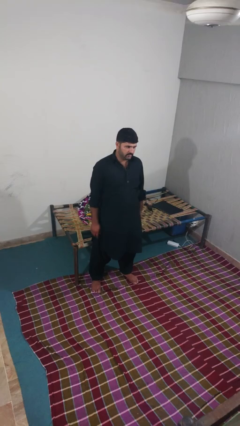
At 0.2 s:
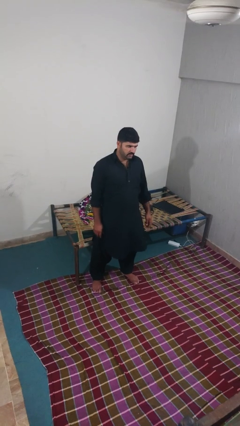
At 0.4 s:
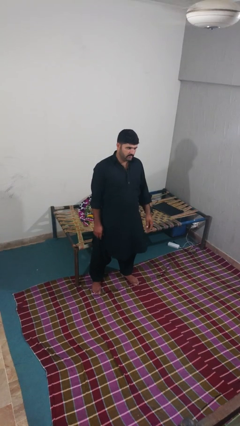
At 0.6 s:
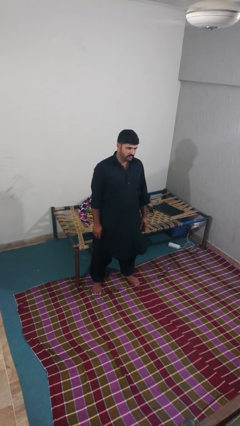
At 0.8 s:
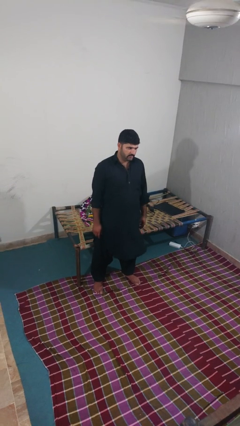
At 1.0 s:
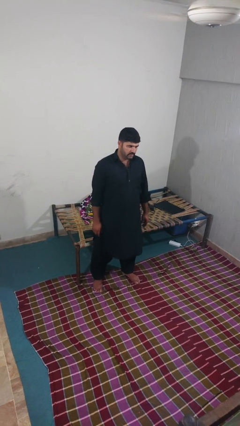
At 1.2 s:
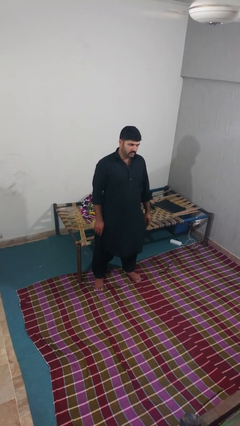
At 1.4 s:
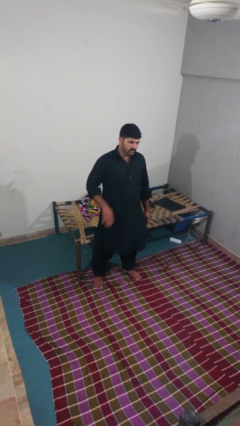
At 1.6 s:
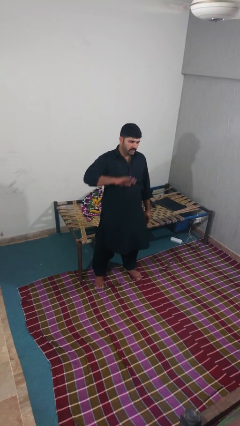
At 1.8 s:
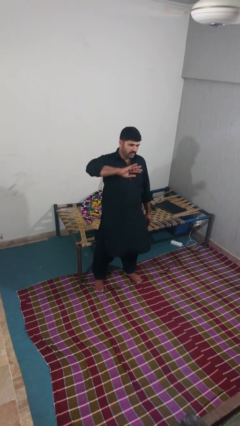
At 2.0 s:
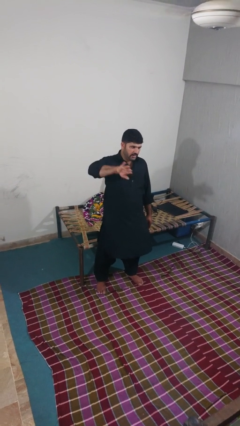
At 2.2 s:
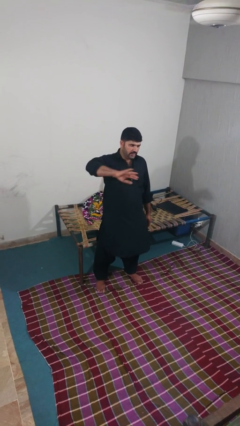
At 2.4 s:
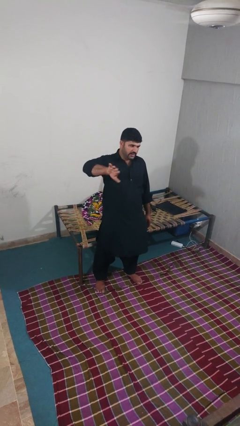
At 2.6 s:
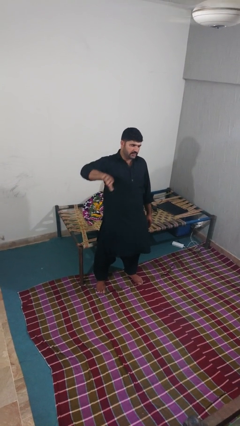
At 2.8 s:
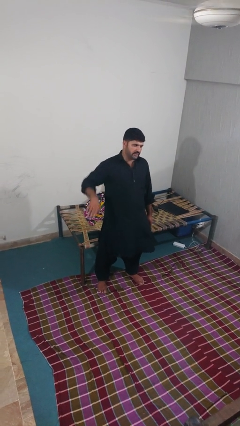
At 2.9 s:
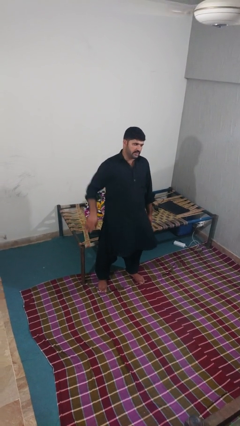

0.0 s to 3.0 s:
person gestures swipe right

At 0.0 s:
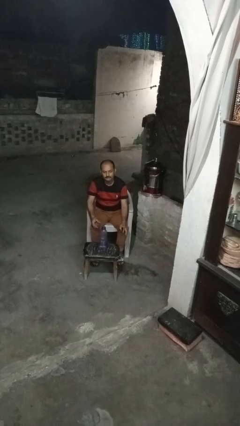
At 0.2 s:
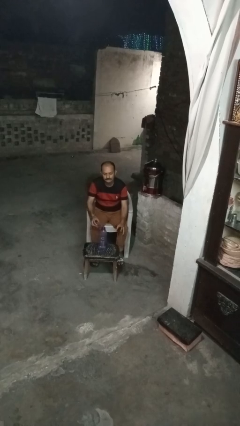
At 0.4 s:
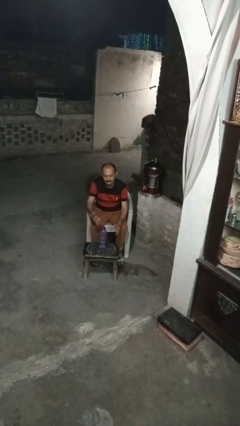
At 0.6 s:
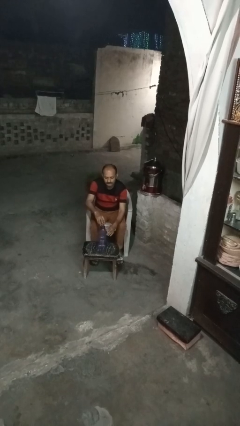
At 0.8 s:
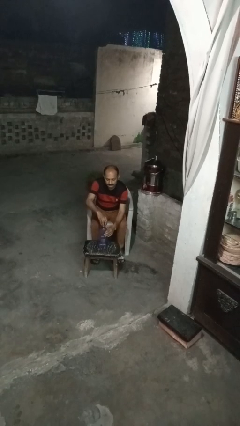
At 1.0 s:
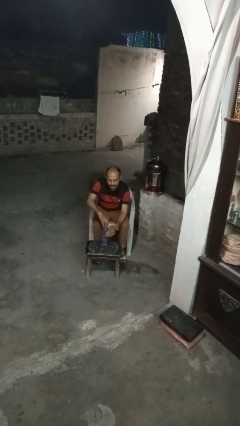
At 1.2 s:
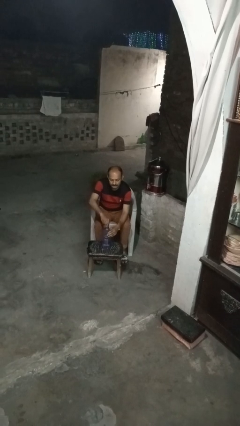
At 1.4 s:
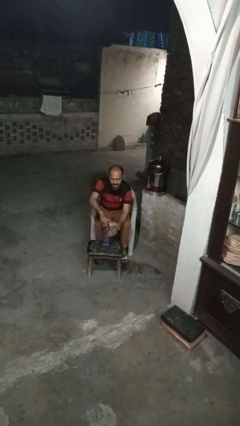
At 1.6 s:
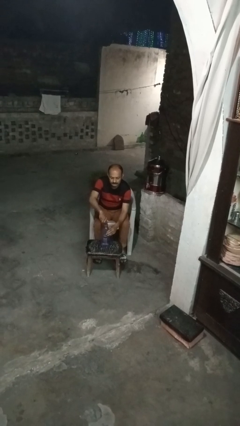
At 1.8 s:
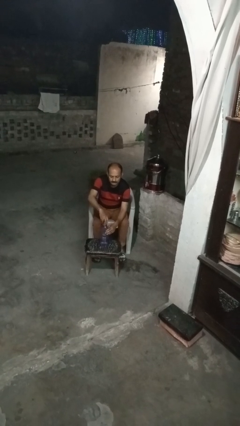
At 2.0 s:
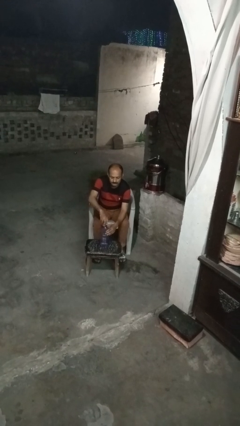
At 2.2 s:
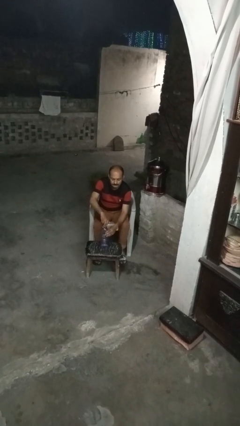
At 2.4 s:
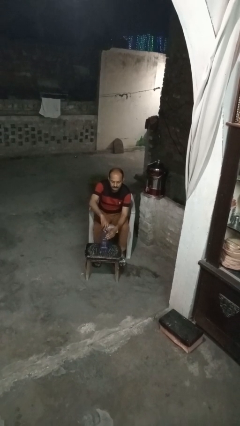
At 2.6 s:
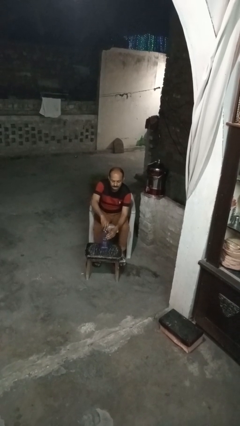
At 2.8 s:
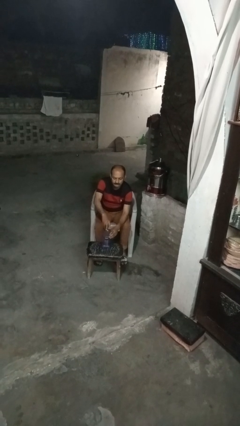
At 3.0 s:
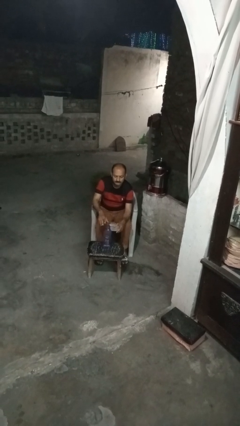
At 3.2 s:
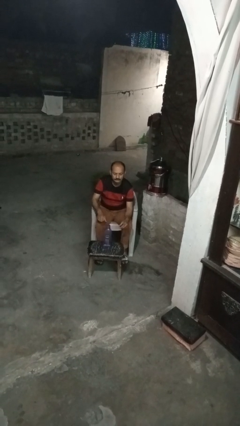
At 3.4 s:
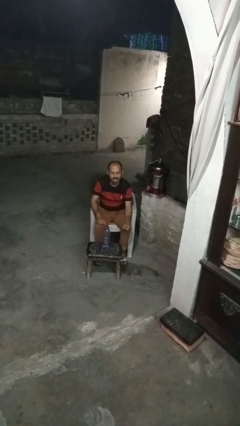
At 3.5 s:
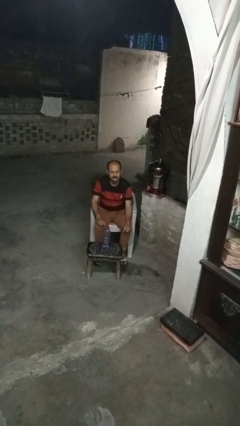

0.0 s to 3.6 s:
person screws lid to bottle

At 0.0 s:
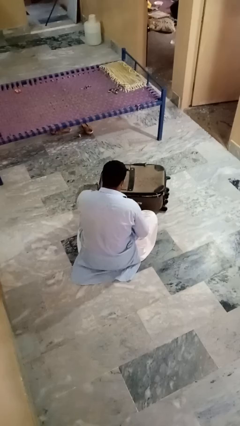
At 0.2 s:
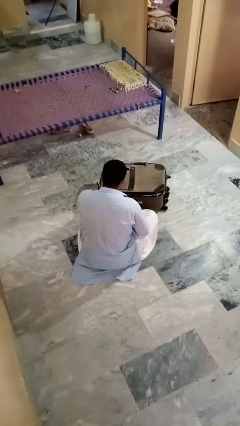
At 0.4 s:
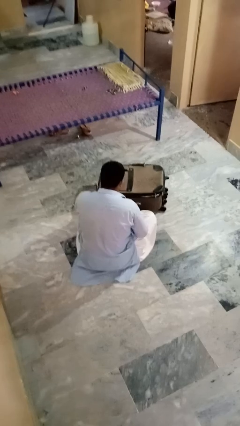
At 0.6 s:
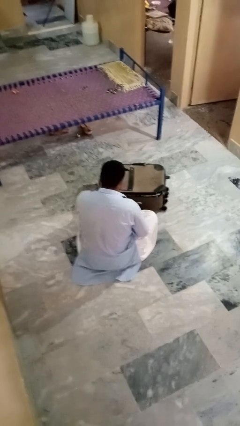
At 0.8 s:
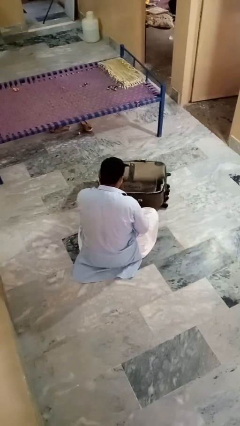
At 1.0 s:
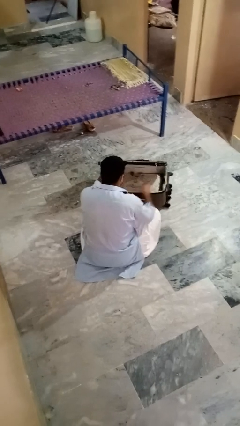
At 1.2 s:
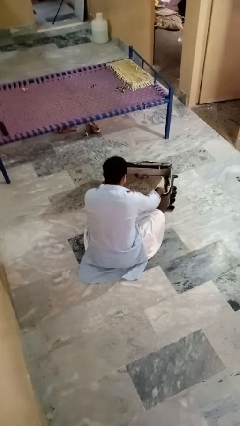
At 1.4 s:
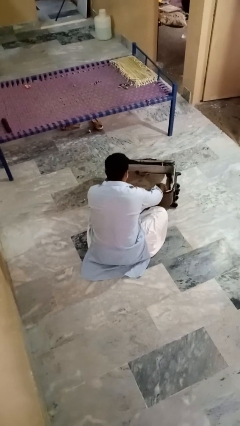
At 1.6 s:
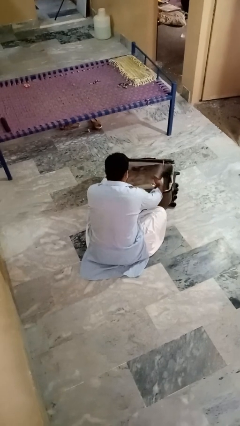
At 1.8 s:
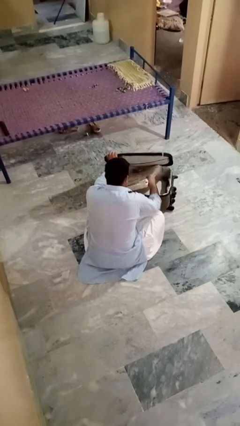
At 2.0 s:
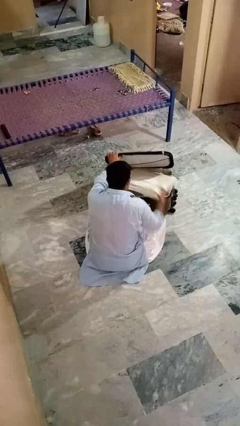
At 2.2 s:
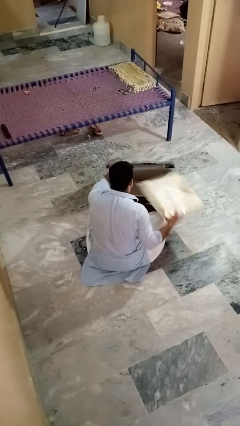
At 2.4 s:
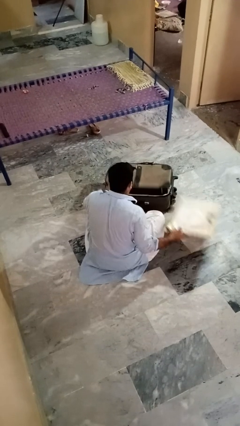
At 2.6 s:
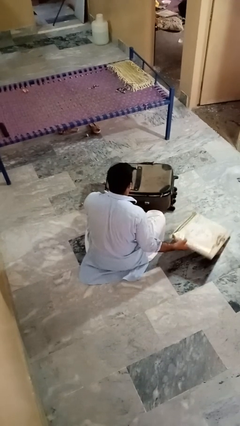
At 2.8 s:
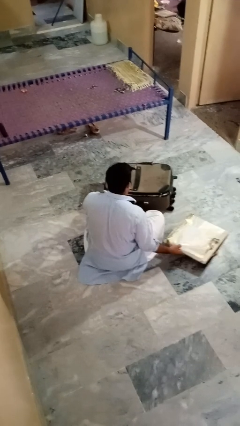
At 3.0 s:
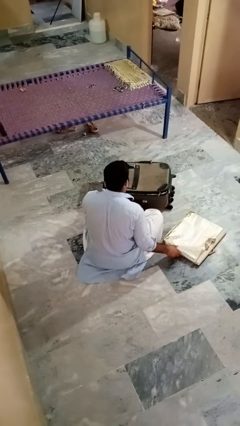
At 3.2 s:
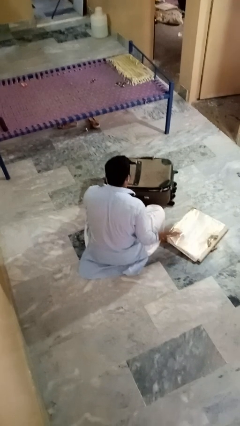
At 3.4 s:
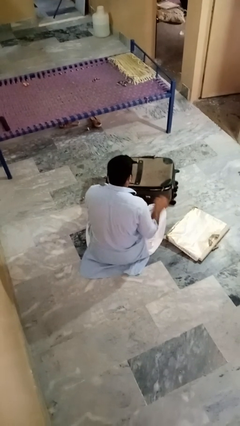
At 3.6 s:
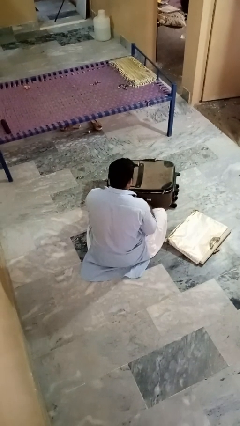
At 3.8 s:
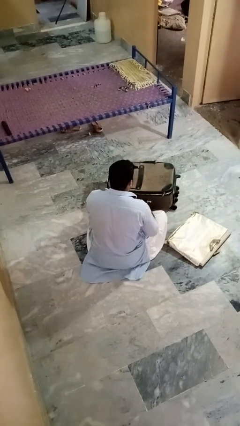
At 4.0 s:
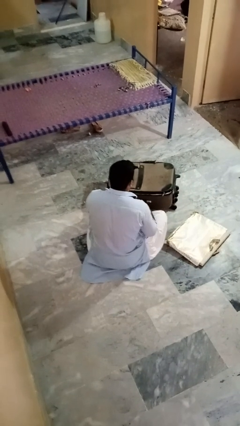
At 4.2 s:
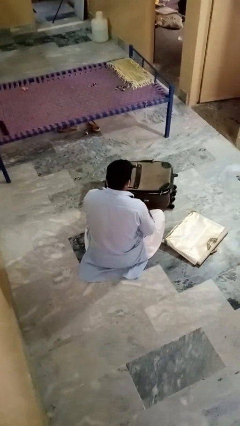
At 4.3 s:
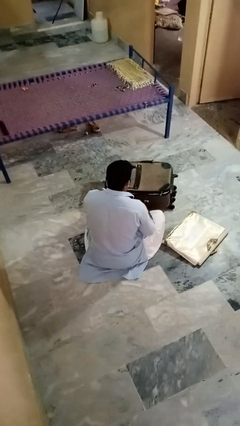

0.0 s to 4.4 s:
person takes object from bag

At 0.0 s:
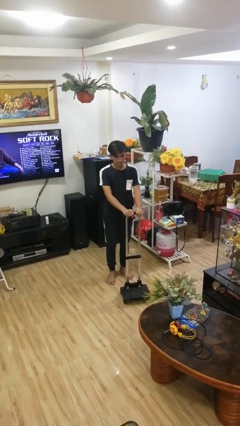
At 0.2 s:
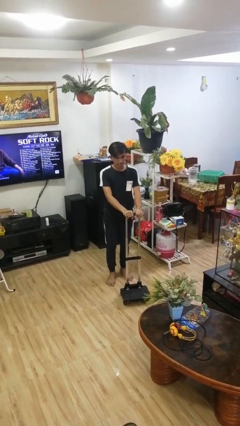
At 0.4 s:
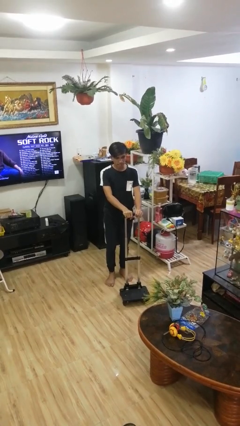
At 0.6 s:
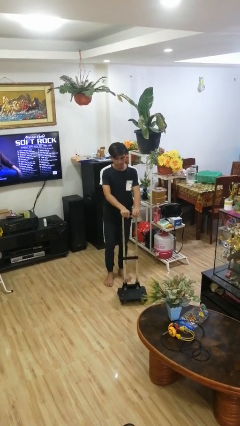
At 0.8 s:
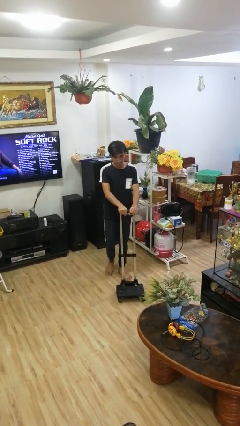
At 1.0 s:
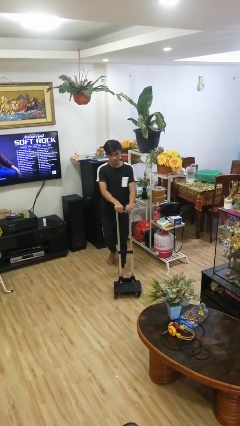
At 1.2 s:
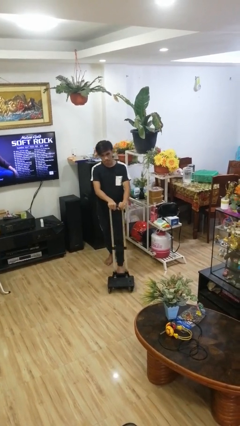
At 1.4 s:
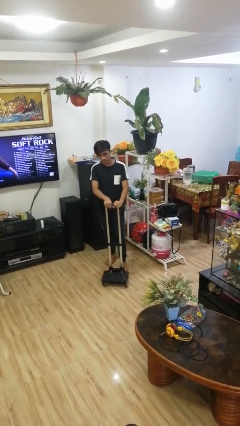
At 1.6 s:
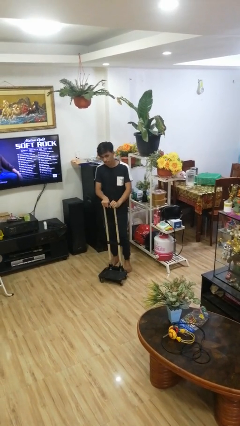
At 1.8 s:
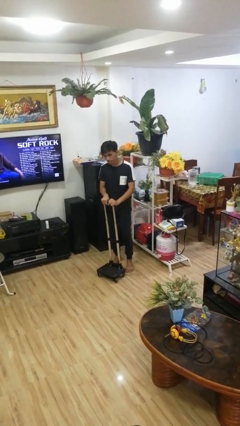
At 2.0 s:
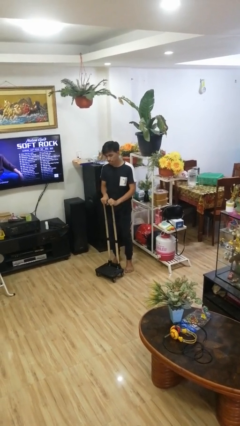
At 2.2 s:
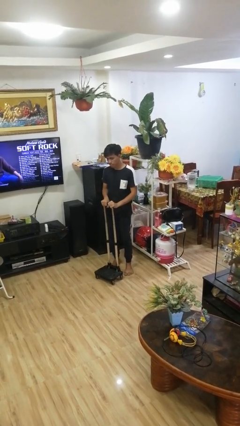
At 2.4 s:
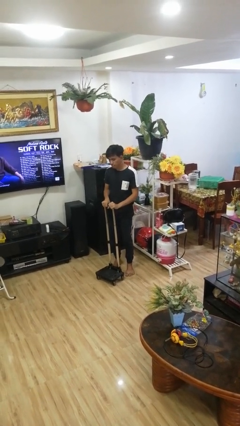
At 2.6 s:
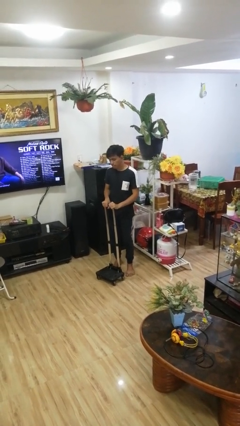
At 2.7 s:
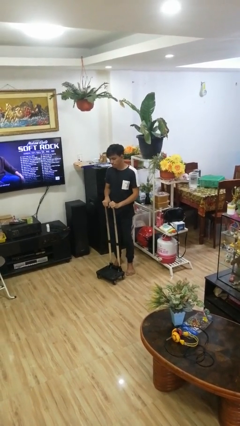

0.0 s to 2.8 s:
person pulls wheeled cart

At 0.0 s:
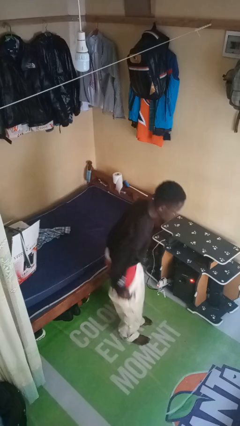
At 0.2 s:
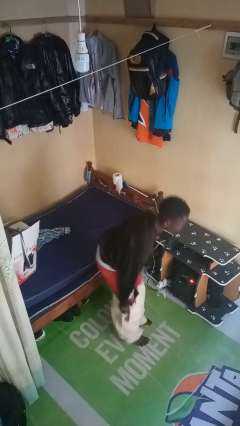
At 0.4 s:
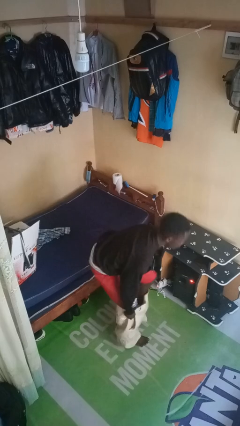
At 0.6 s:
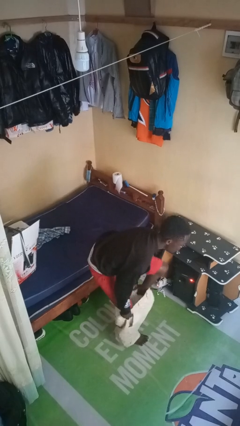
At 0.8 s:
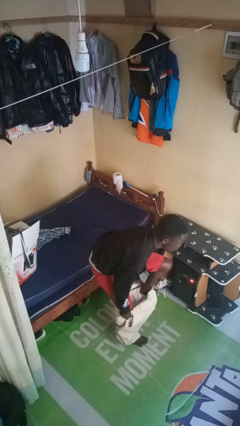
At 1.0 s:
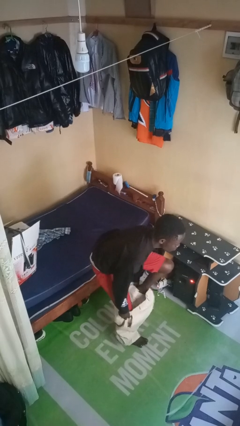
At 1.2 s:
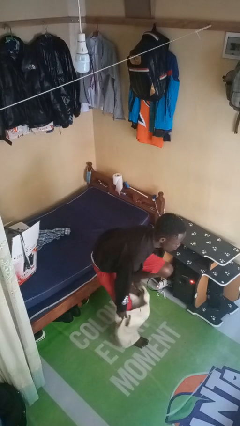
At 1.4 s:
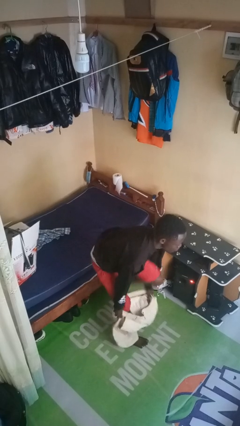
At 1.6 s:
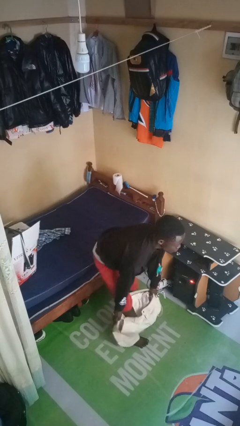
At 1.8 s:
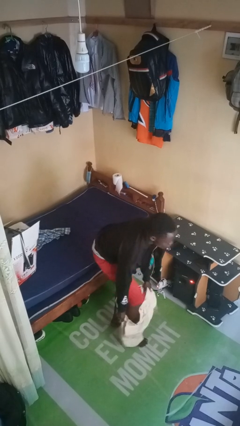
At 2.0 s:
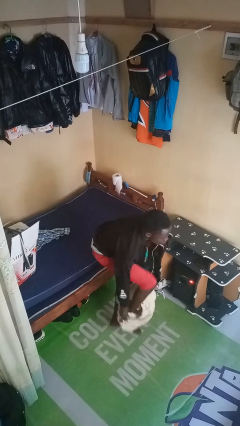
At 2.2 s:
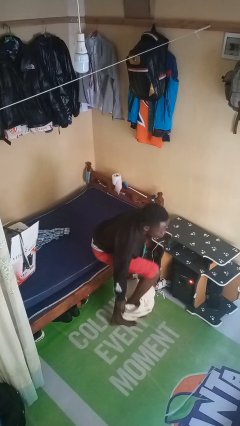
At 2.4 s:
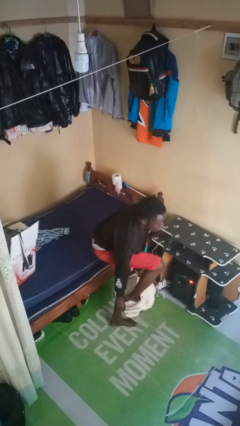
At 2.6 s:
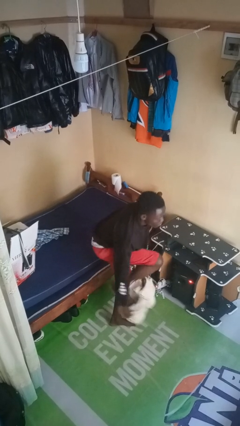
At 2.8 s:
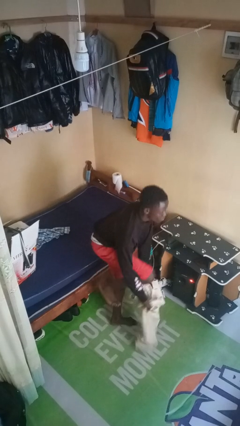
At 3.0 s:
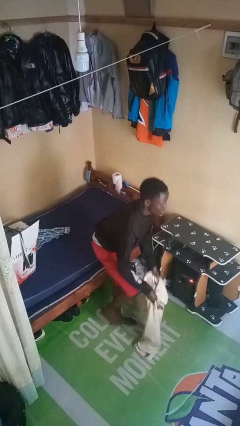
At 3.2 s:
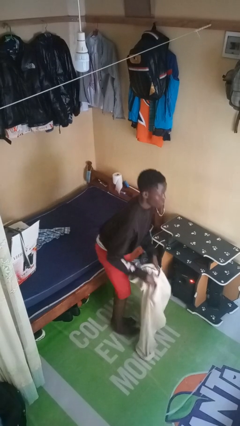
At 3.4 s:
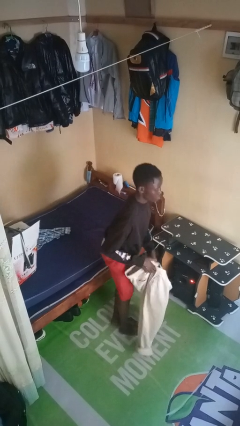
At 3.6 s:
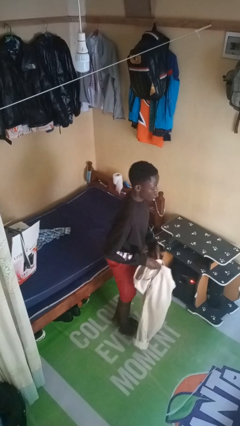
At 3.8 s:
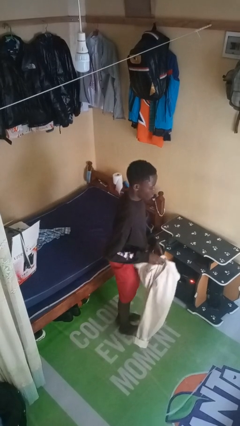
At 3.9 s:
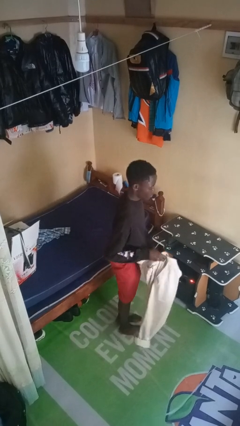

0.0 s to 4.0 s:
person takes off pants
